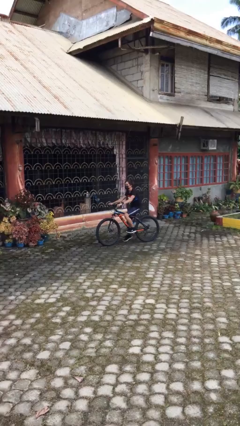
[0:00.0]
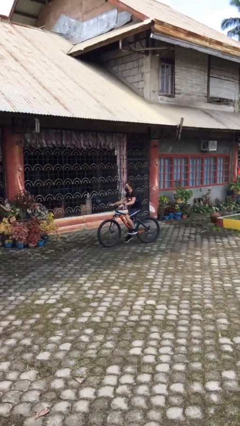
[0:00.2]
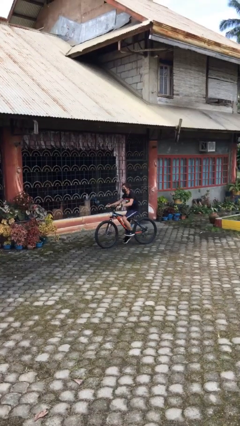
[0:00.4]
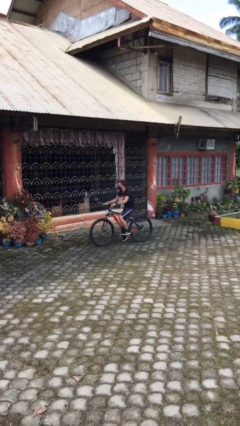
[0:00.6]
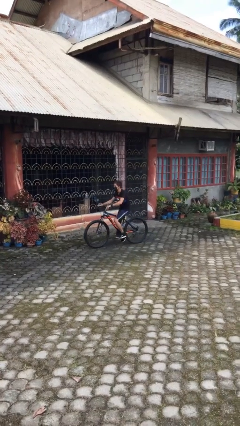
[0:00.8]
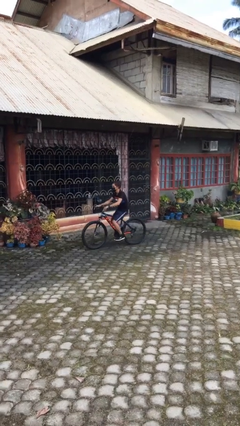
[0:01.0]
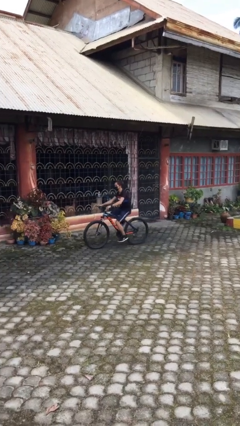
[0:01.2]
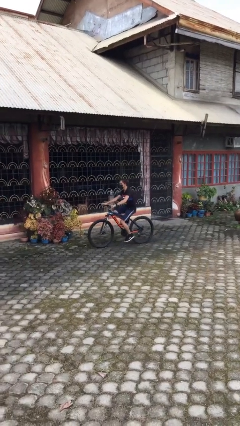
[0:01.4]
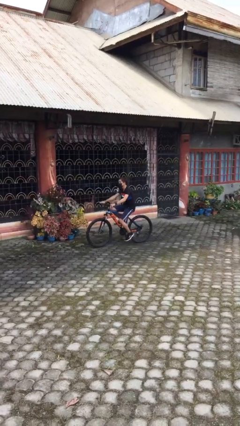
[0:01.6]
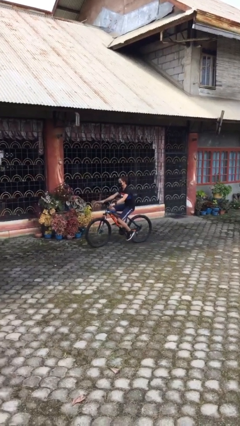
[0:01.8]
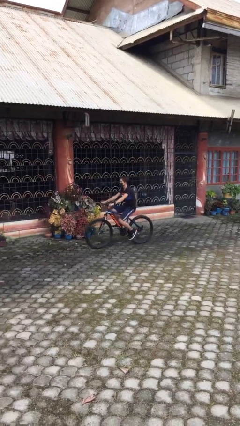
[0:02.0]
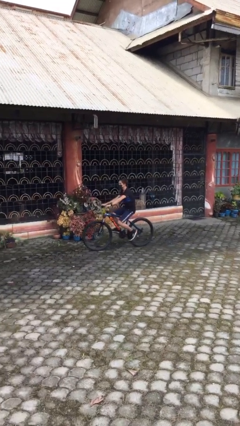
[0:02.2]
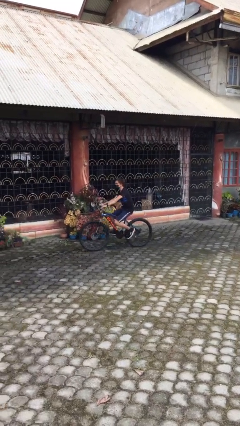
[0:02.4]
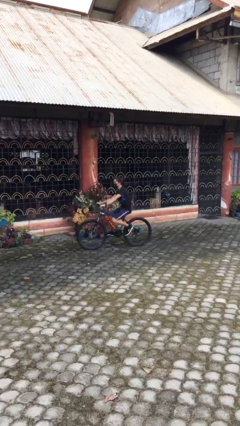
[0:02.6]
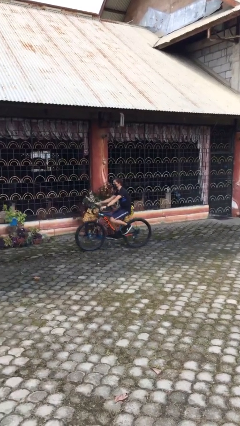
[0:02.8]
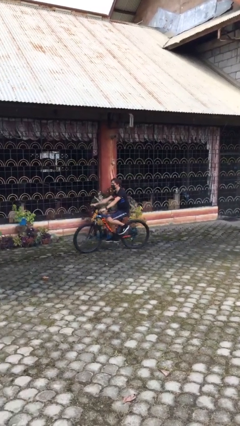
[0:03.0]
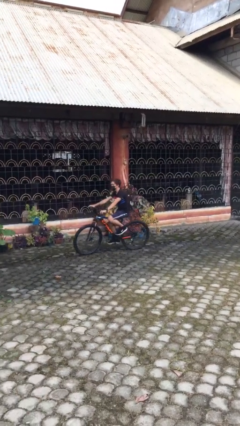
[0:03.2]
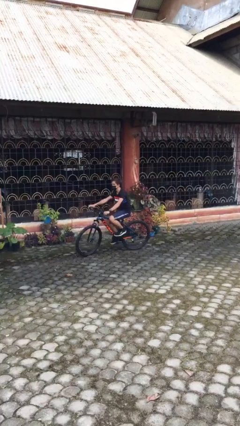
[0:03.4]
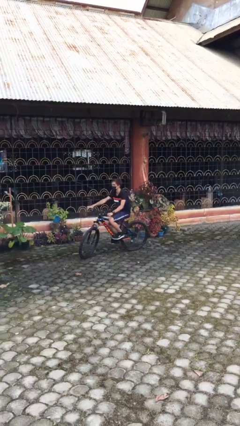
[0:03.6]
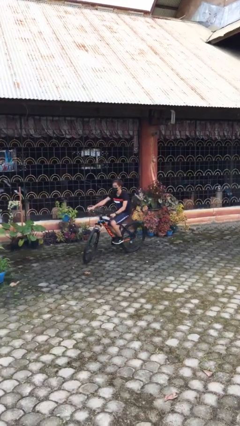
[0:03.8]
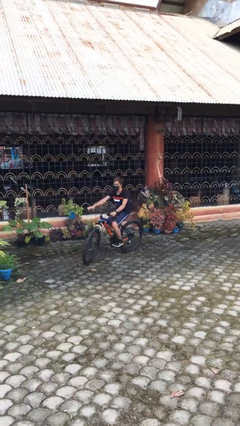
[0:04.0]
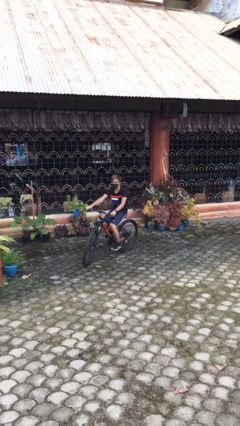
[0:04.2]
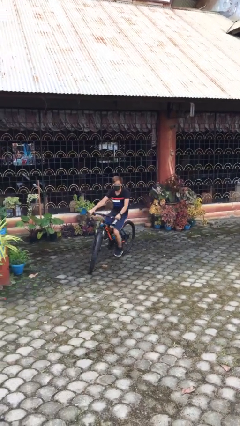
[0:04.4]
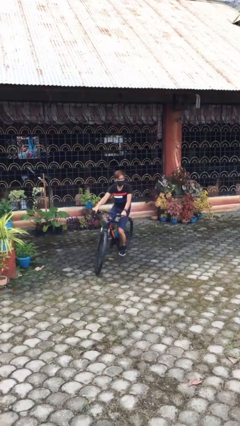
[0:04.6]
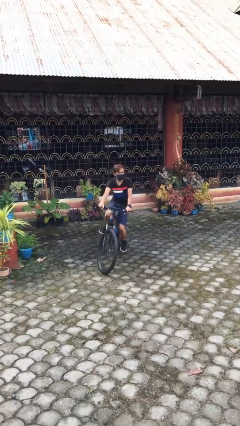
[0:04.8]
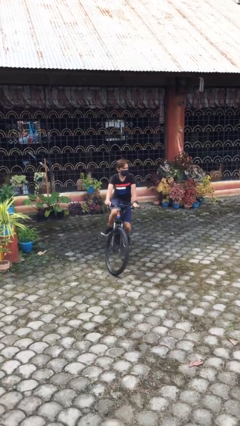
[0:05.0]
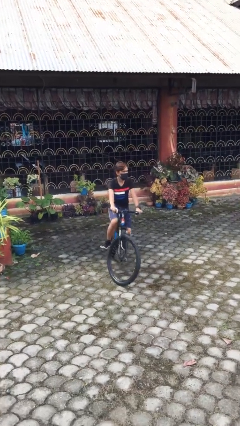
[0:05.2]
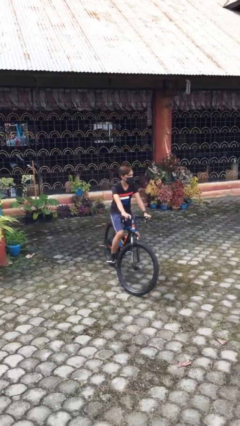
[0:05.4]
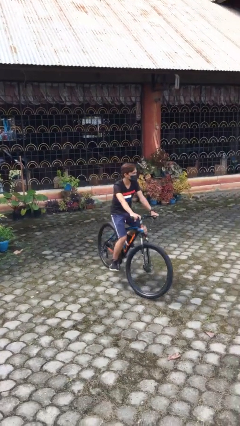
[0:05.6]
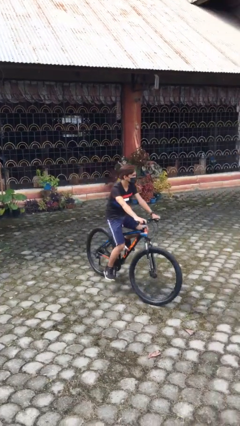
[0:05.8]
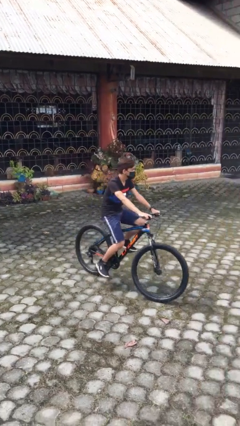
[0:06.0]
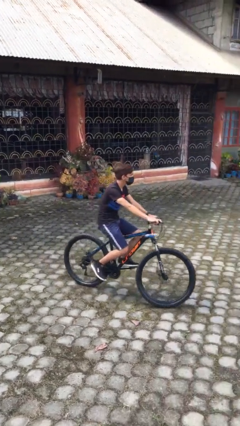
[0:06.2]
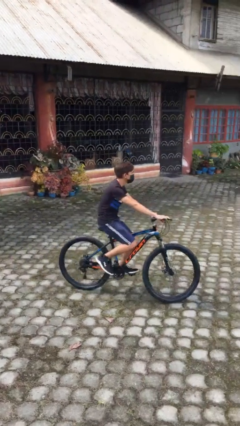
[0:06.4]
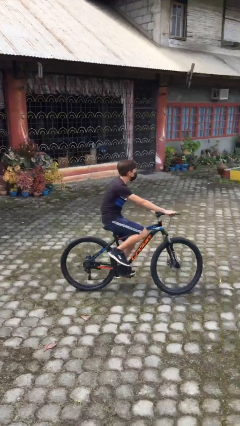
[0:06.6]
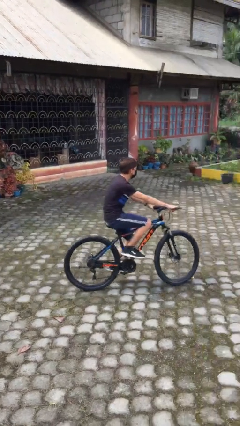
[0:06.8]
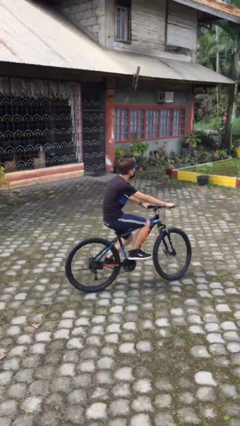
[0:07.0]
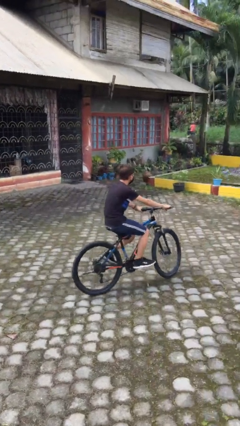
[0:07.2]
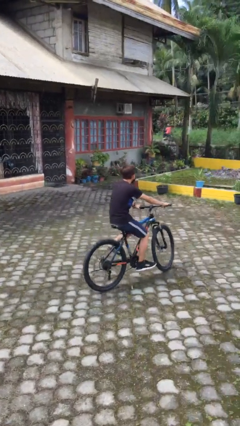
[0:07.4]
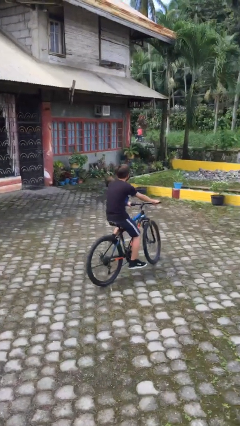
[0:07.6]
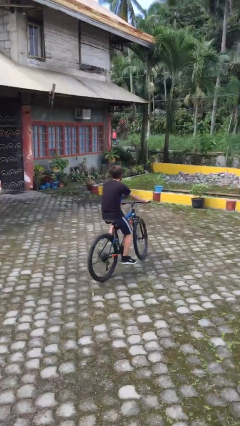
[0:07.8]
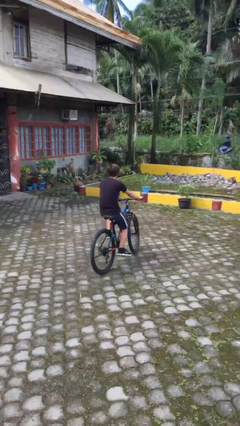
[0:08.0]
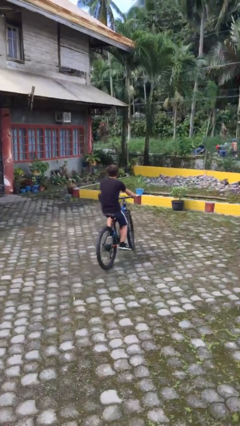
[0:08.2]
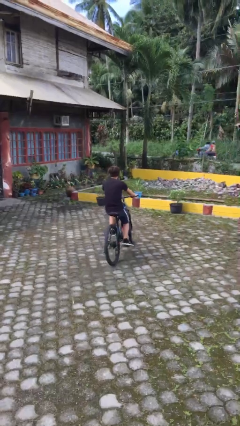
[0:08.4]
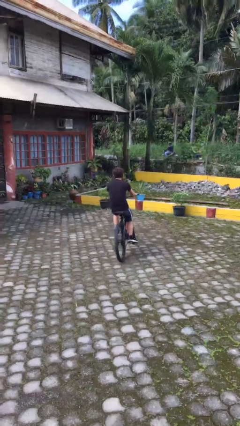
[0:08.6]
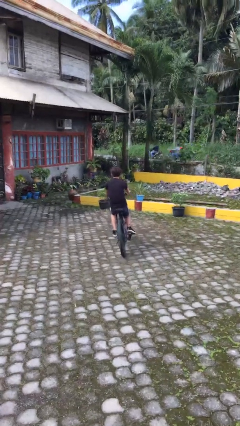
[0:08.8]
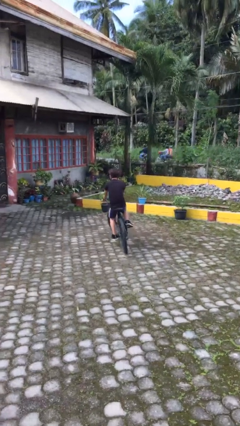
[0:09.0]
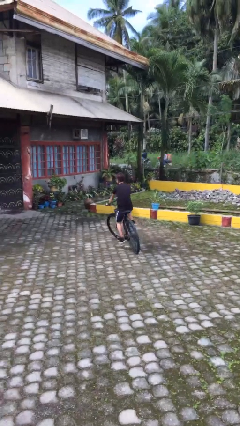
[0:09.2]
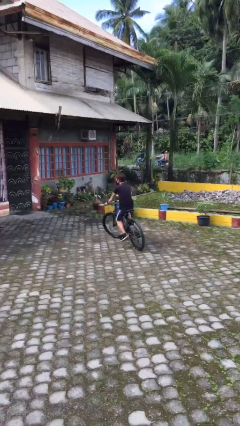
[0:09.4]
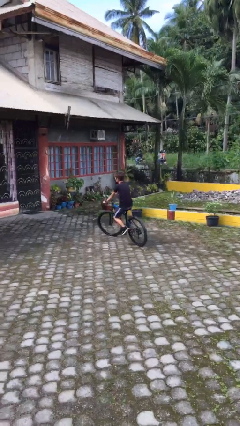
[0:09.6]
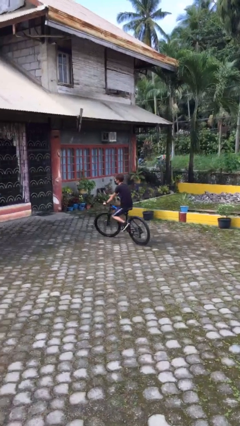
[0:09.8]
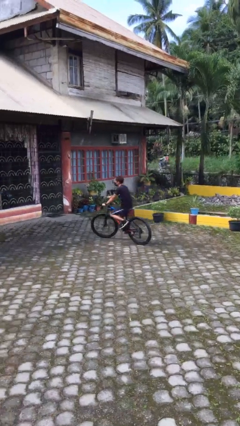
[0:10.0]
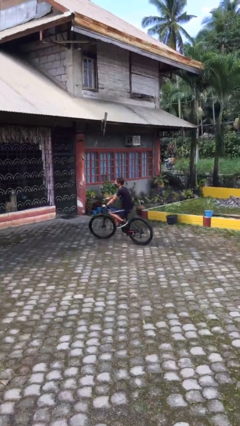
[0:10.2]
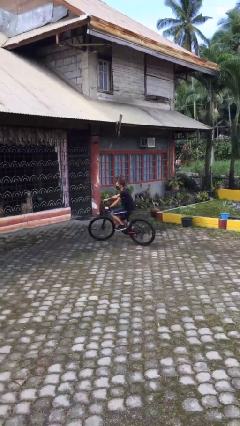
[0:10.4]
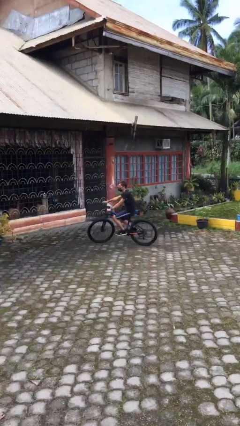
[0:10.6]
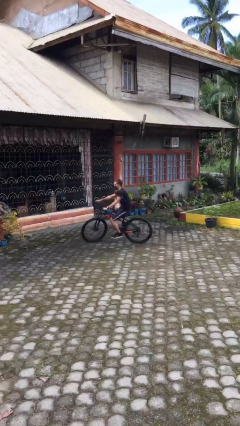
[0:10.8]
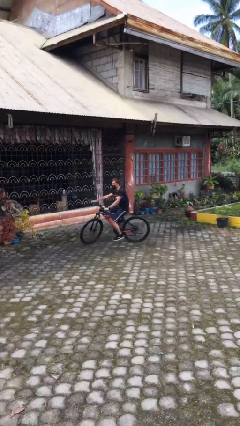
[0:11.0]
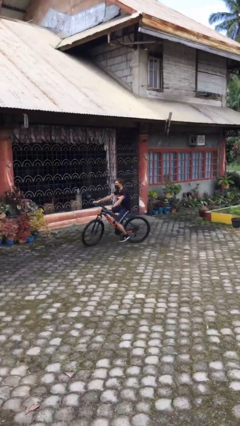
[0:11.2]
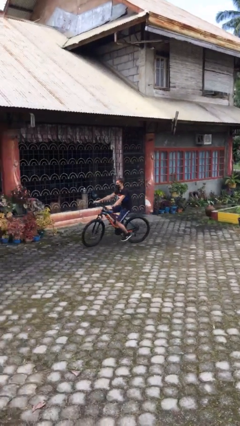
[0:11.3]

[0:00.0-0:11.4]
person rides bicycle

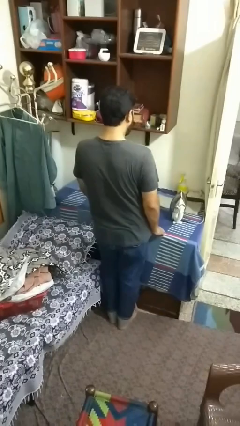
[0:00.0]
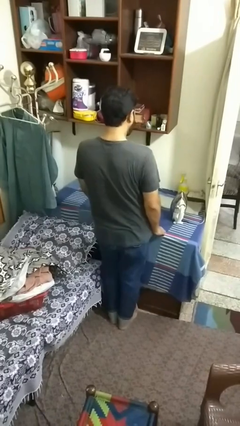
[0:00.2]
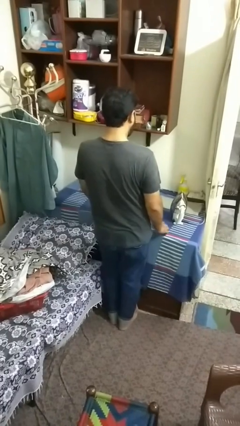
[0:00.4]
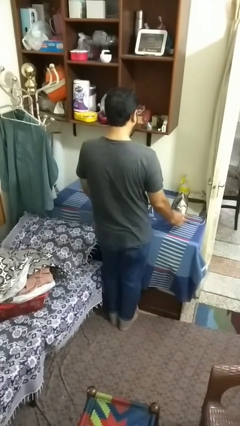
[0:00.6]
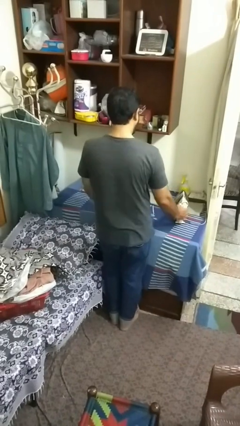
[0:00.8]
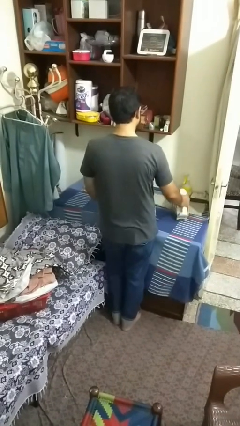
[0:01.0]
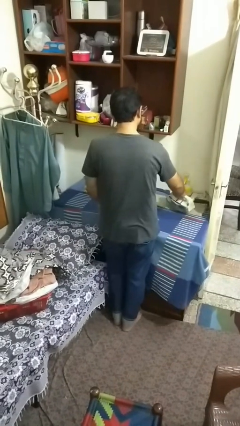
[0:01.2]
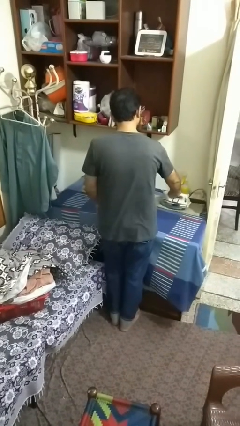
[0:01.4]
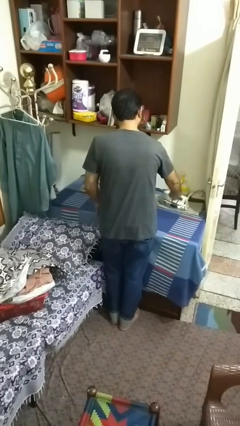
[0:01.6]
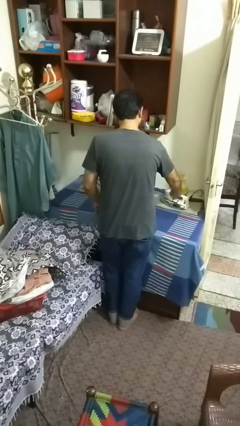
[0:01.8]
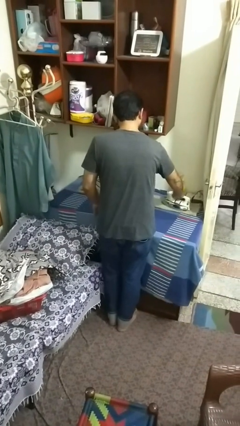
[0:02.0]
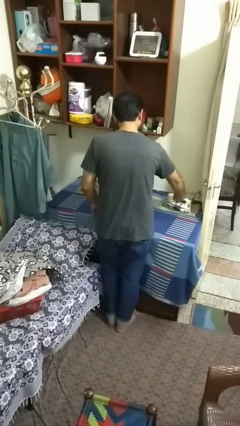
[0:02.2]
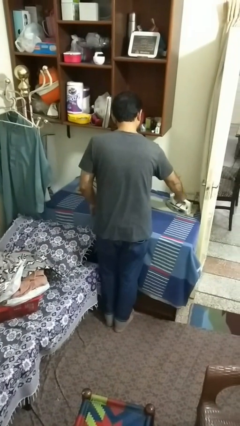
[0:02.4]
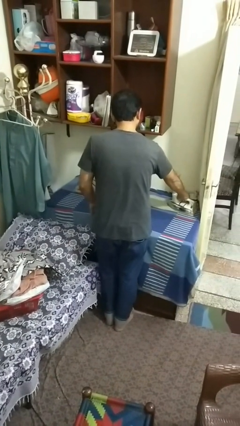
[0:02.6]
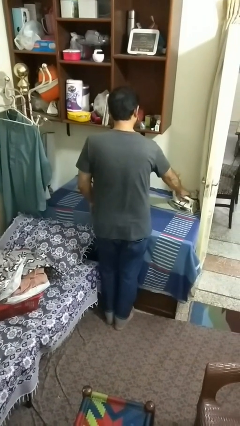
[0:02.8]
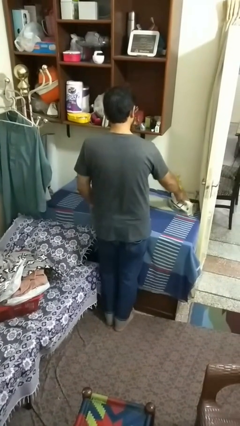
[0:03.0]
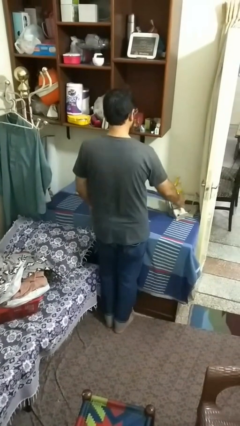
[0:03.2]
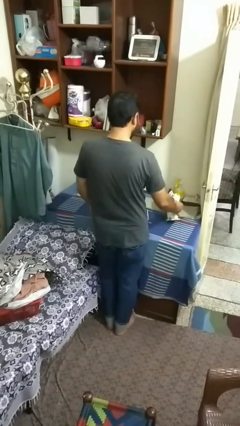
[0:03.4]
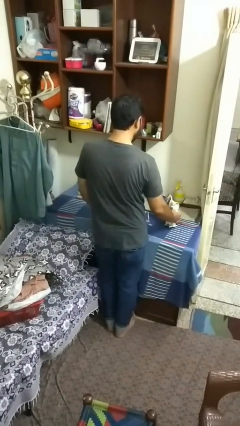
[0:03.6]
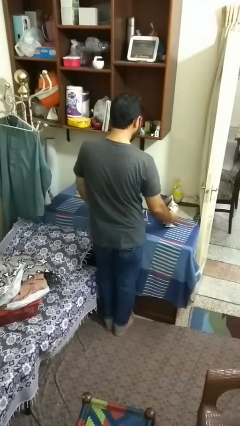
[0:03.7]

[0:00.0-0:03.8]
person irons clothes

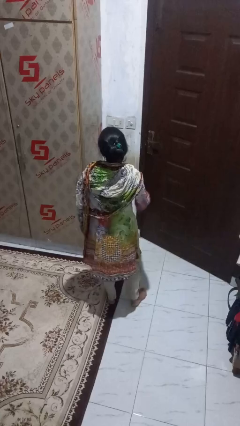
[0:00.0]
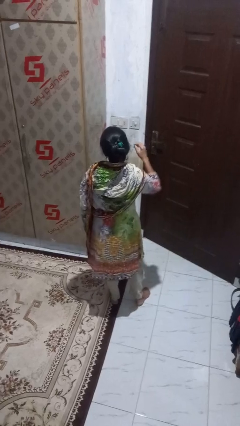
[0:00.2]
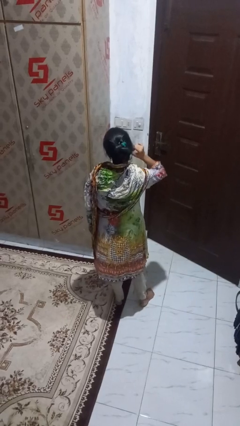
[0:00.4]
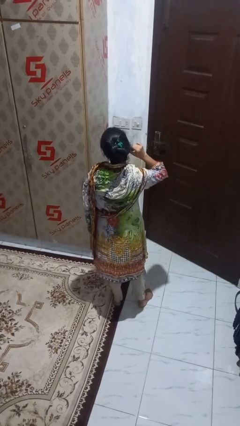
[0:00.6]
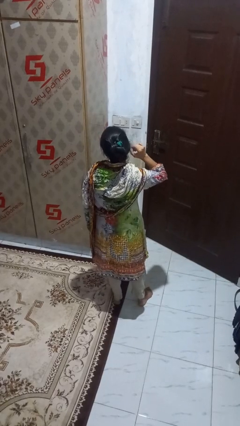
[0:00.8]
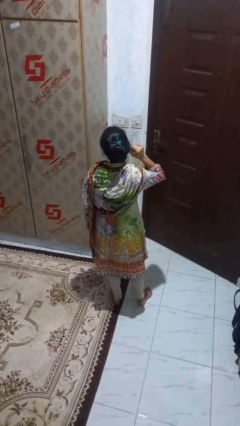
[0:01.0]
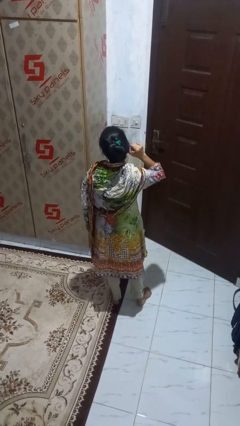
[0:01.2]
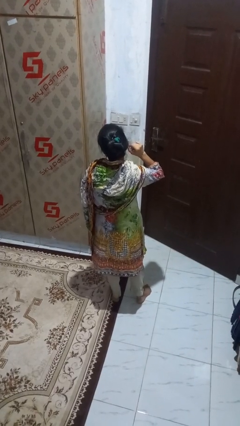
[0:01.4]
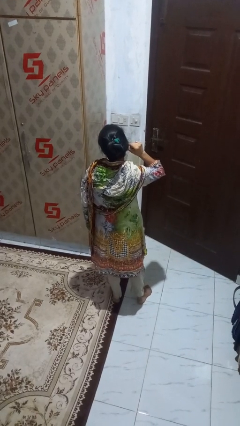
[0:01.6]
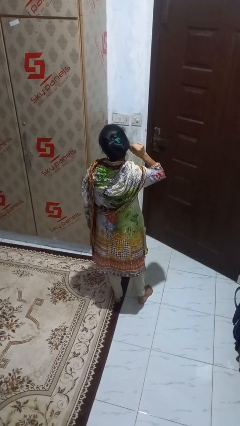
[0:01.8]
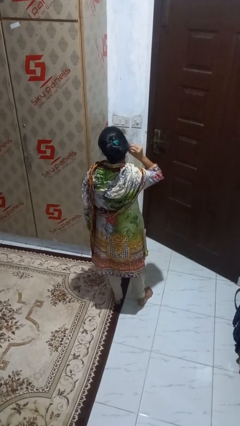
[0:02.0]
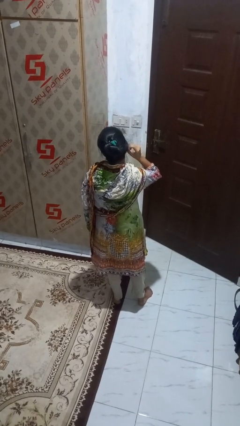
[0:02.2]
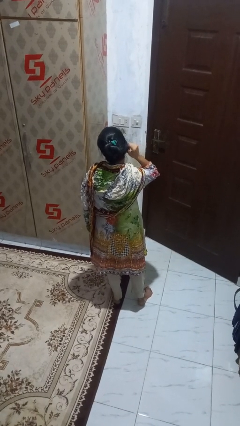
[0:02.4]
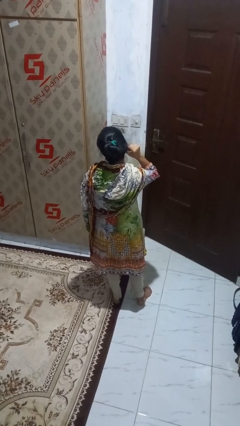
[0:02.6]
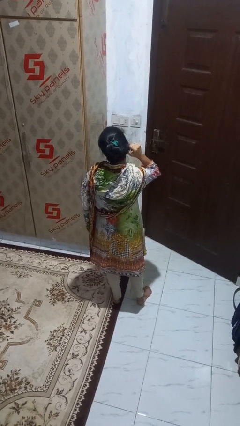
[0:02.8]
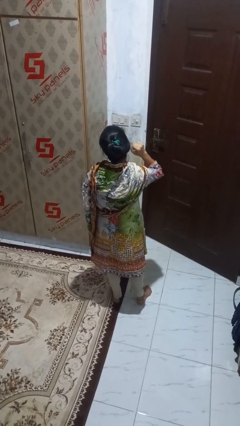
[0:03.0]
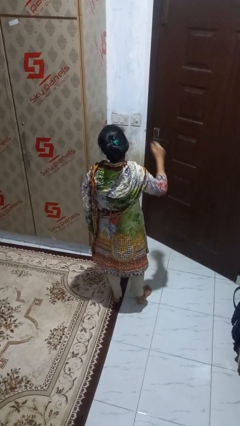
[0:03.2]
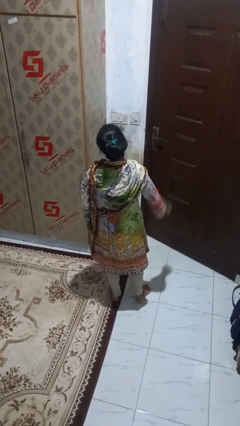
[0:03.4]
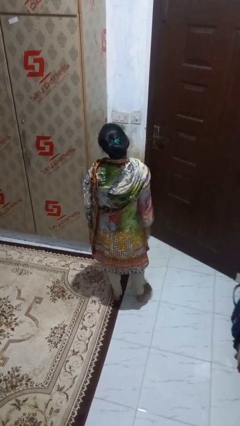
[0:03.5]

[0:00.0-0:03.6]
person touches earlobe
